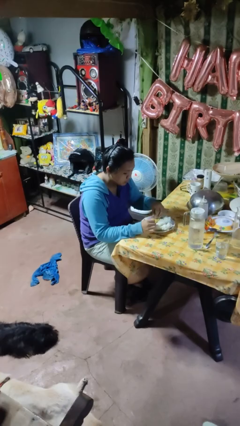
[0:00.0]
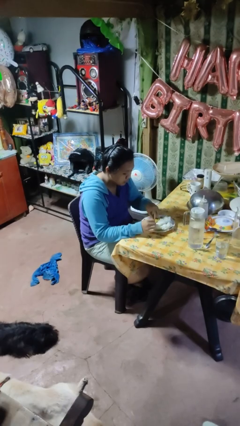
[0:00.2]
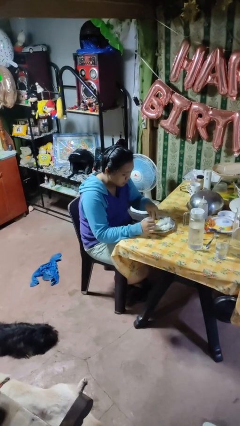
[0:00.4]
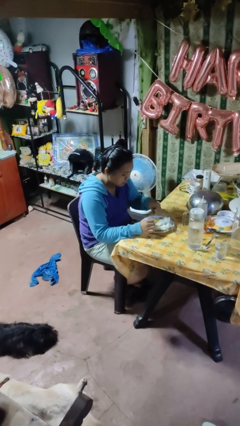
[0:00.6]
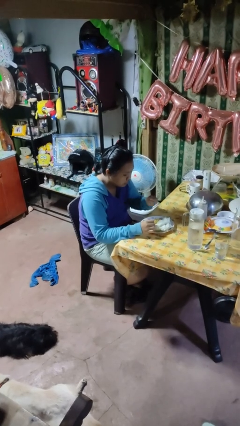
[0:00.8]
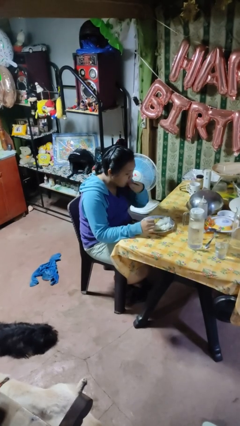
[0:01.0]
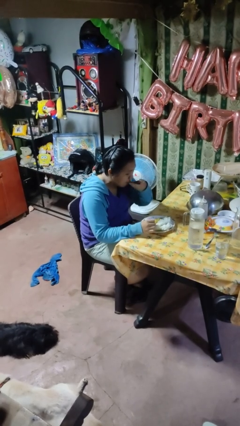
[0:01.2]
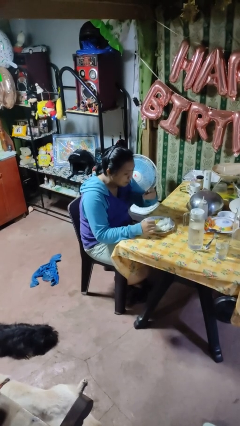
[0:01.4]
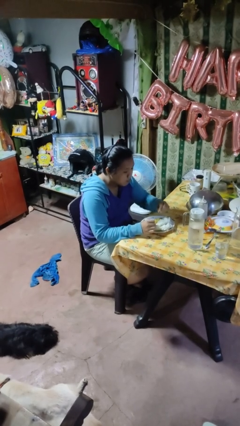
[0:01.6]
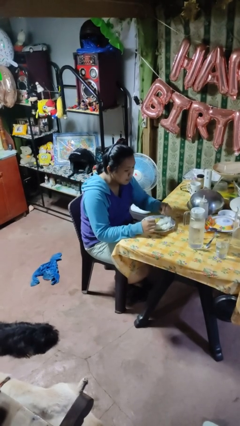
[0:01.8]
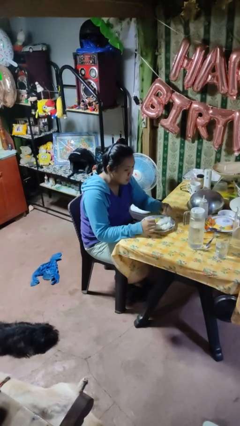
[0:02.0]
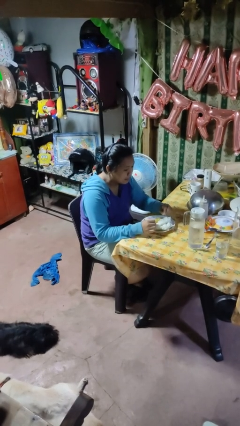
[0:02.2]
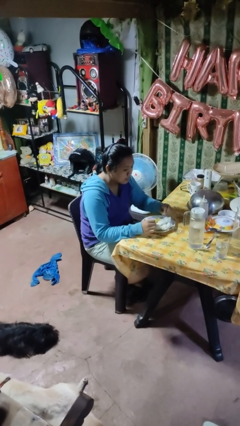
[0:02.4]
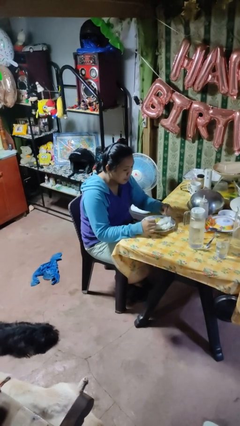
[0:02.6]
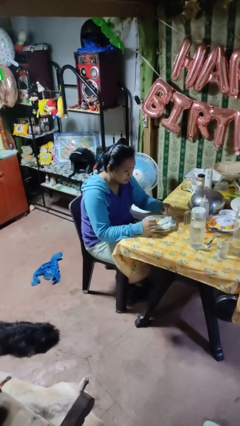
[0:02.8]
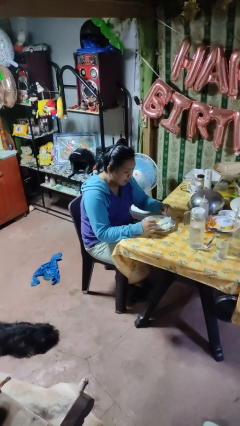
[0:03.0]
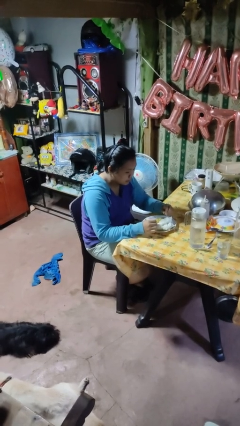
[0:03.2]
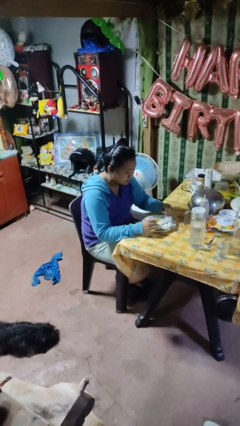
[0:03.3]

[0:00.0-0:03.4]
person eats with hands

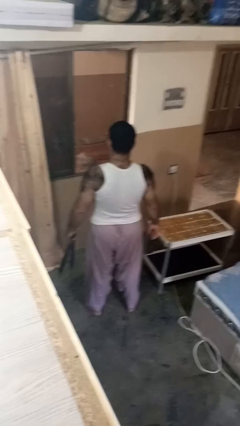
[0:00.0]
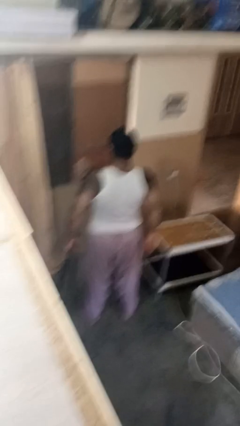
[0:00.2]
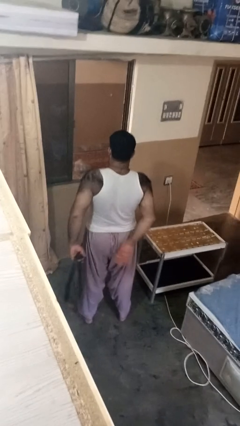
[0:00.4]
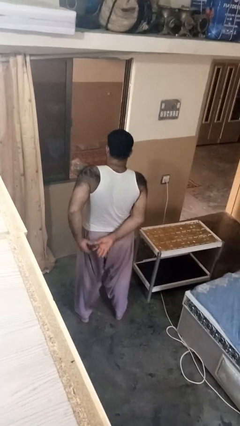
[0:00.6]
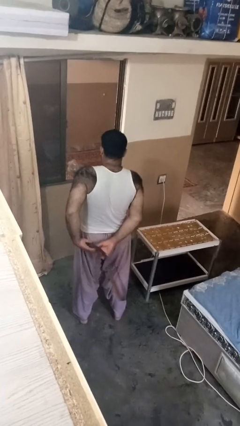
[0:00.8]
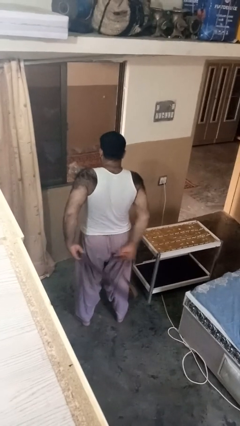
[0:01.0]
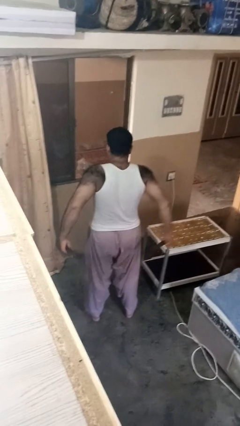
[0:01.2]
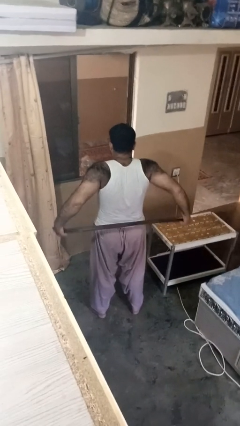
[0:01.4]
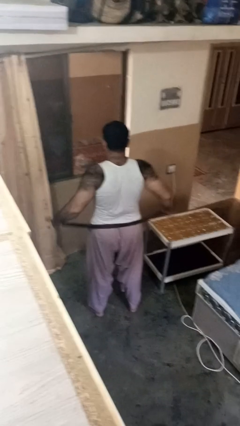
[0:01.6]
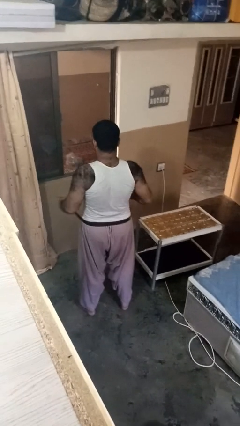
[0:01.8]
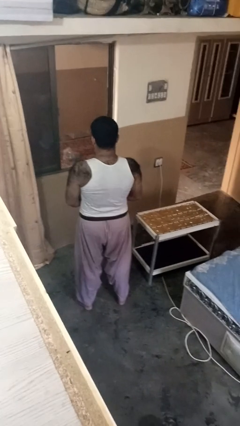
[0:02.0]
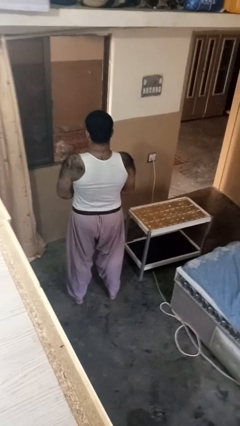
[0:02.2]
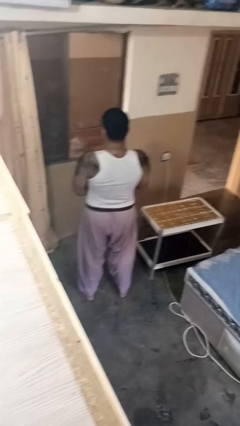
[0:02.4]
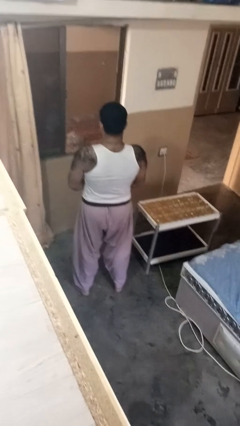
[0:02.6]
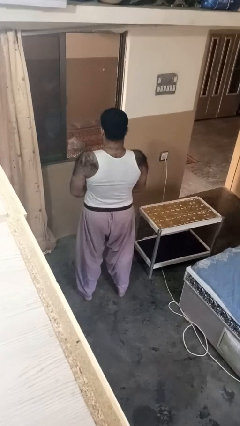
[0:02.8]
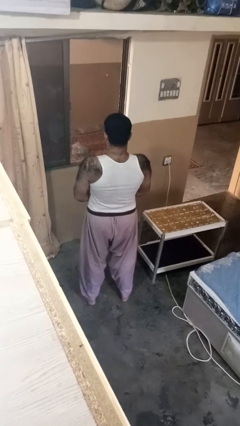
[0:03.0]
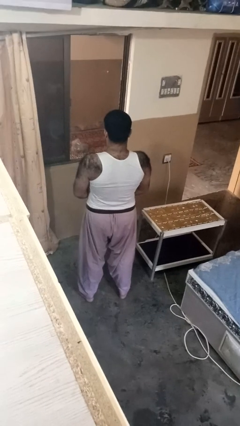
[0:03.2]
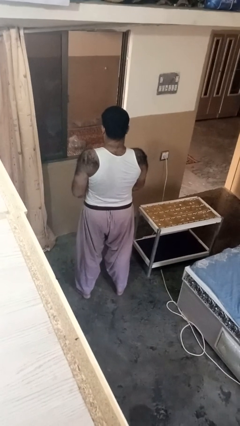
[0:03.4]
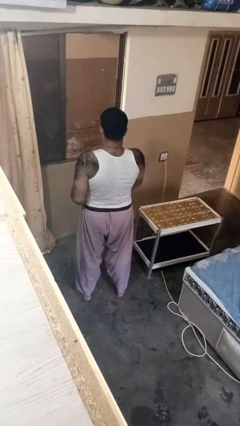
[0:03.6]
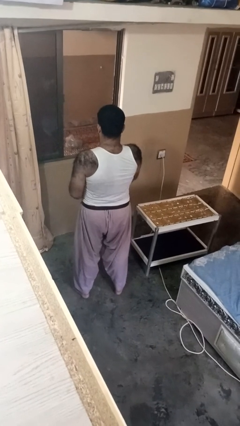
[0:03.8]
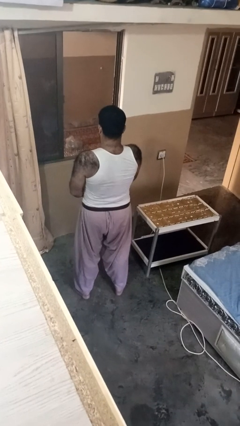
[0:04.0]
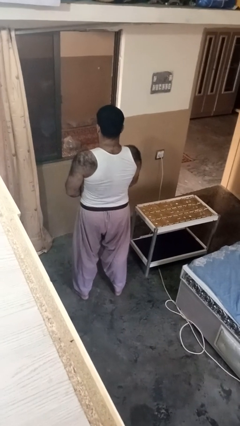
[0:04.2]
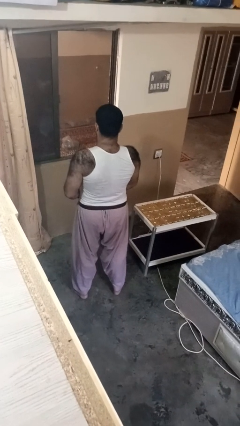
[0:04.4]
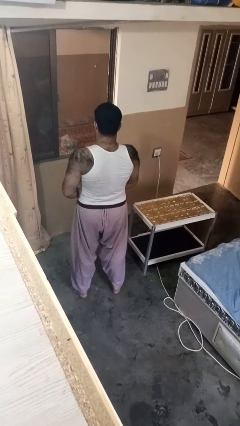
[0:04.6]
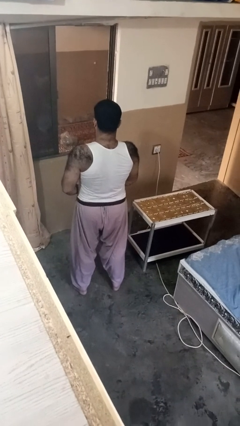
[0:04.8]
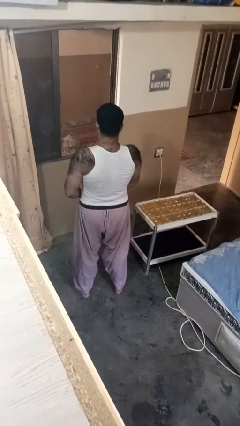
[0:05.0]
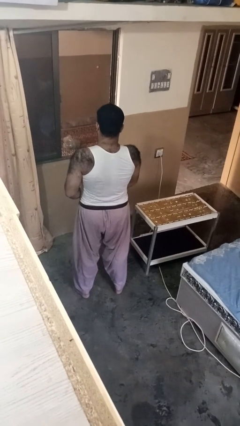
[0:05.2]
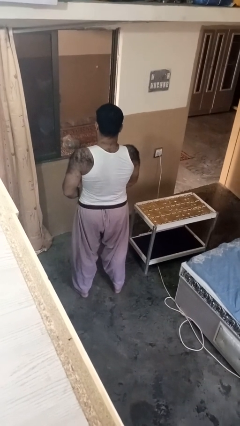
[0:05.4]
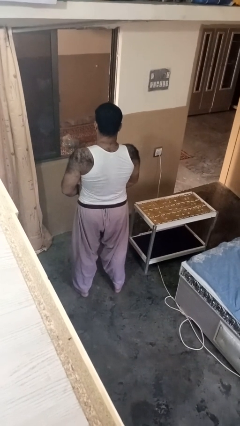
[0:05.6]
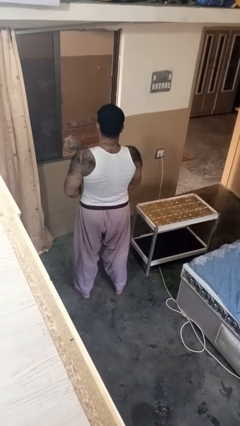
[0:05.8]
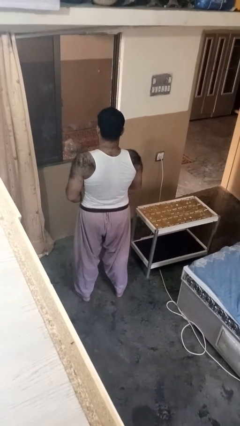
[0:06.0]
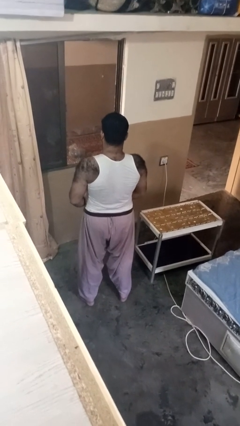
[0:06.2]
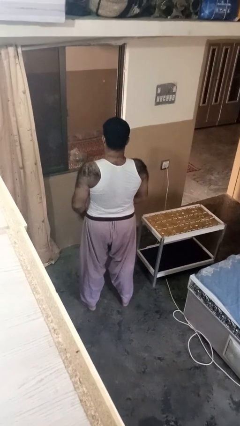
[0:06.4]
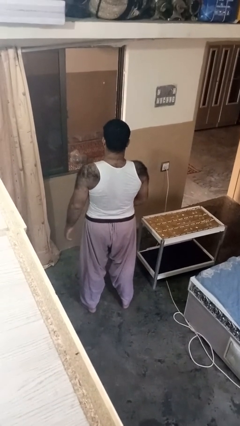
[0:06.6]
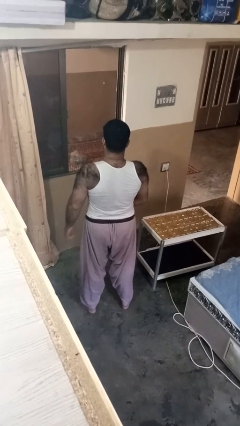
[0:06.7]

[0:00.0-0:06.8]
person puts on belt

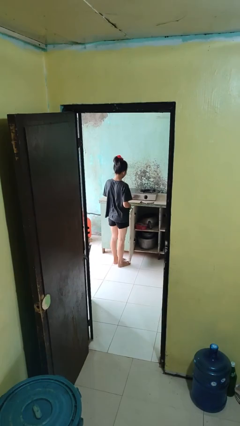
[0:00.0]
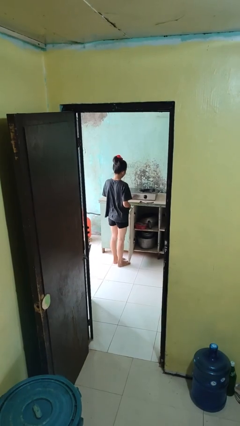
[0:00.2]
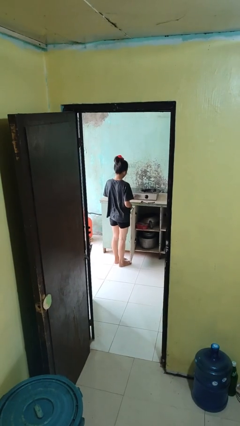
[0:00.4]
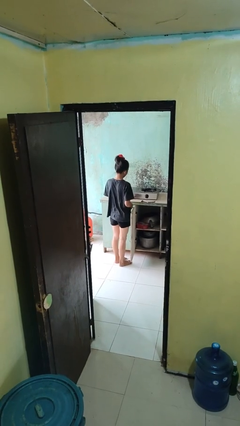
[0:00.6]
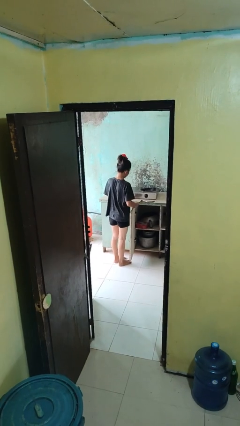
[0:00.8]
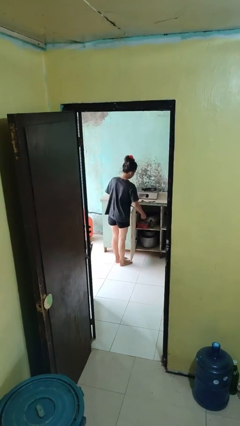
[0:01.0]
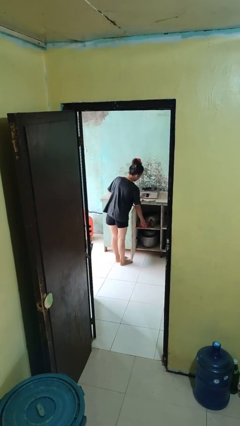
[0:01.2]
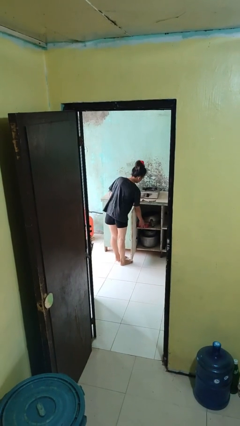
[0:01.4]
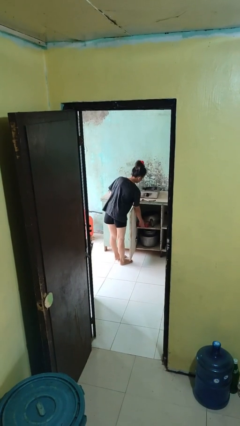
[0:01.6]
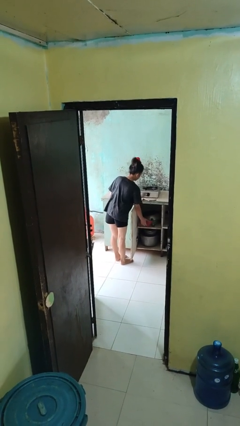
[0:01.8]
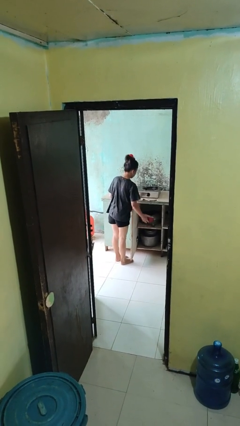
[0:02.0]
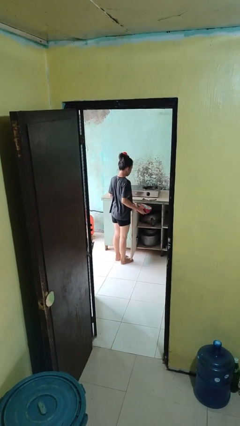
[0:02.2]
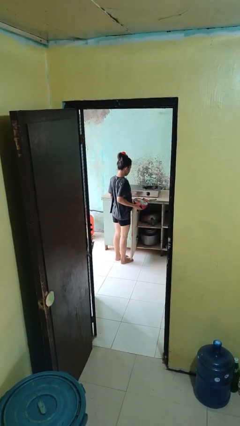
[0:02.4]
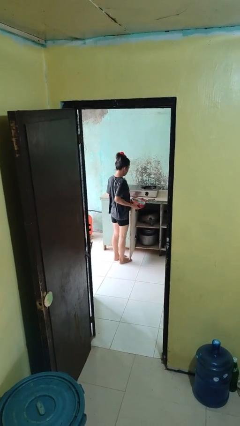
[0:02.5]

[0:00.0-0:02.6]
person takes object from cabinet

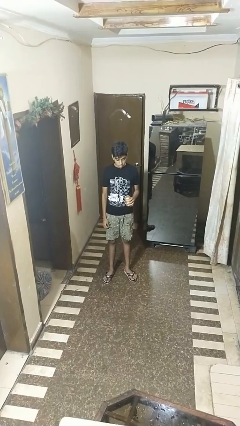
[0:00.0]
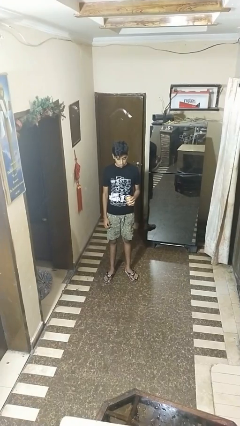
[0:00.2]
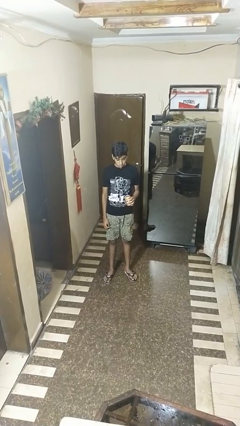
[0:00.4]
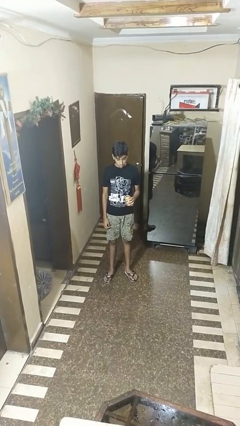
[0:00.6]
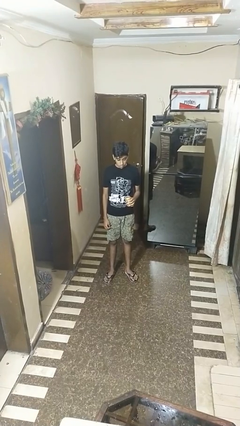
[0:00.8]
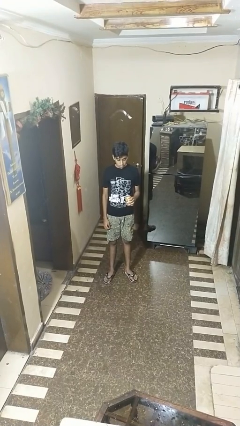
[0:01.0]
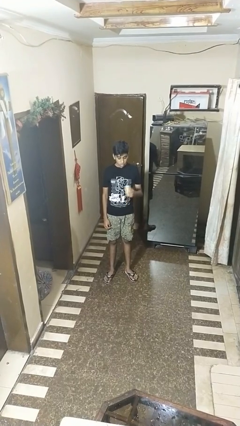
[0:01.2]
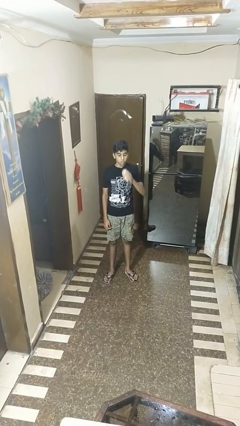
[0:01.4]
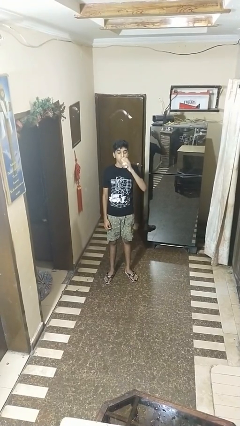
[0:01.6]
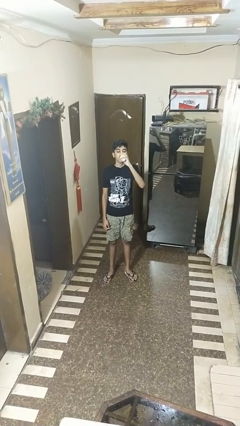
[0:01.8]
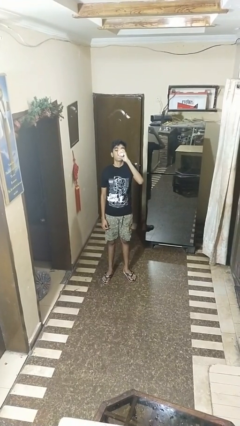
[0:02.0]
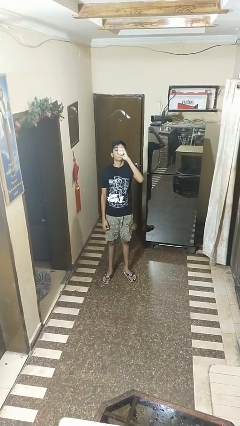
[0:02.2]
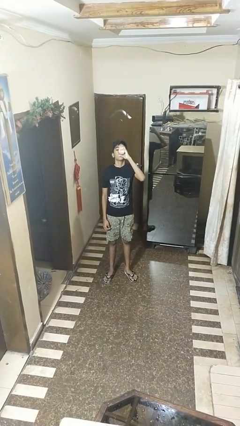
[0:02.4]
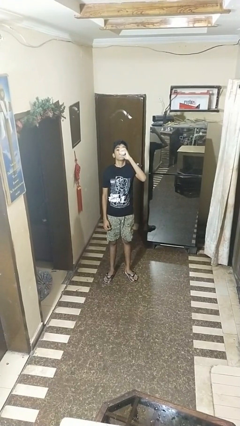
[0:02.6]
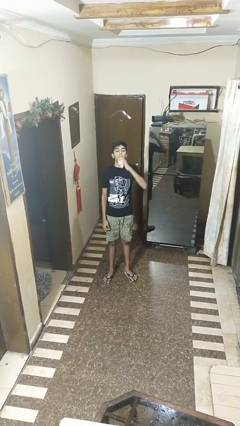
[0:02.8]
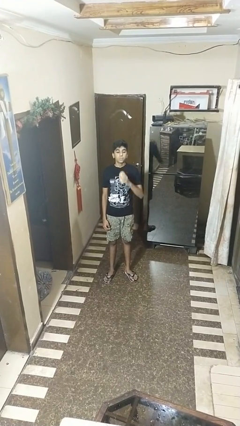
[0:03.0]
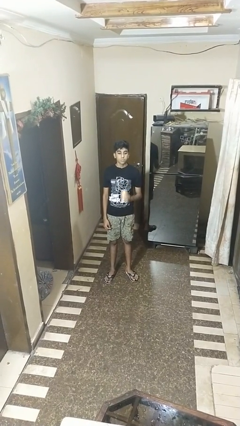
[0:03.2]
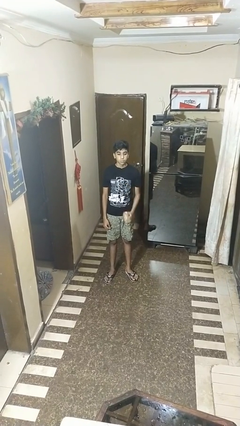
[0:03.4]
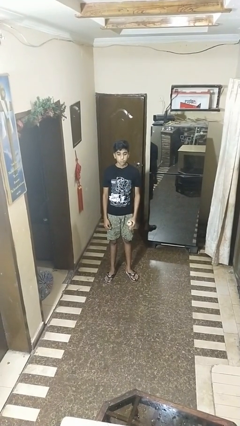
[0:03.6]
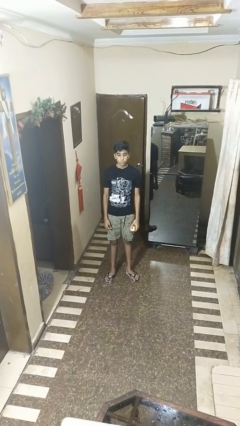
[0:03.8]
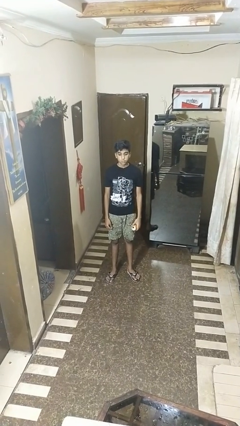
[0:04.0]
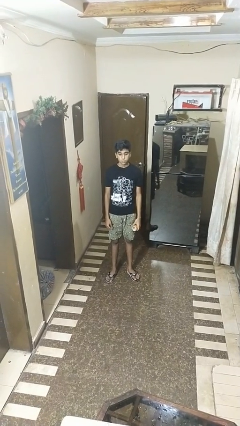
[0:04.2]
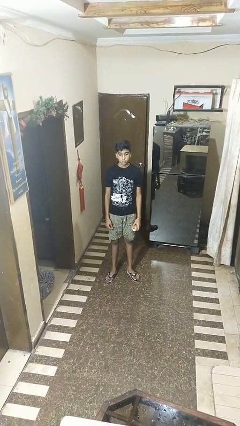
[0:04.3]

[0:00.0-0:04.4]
person drinks from beverage can

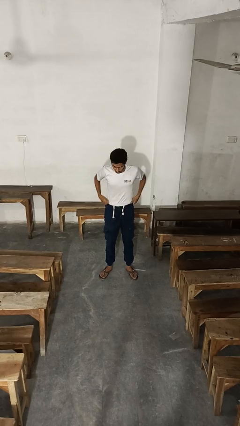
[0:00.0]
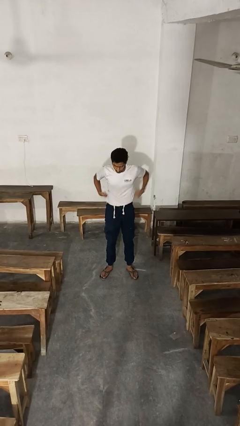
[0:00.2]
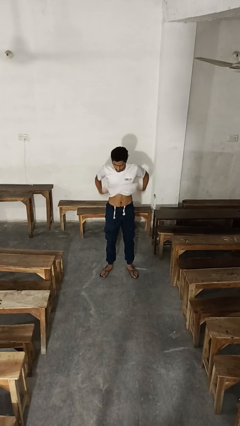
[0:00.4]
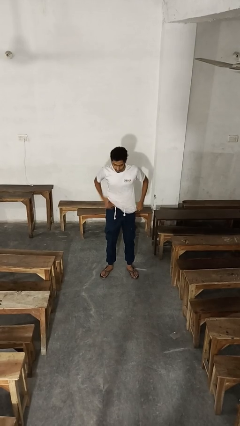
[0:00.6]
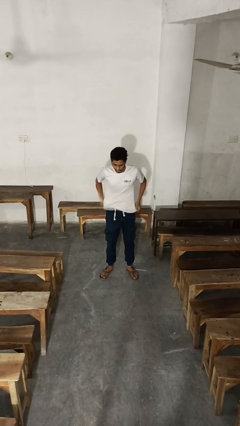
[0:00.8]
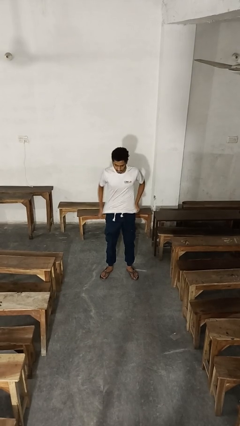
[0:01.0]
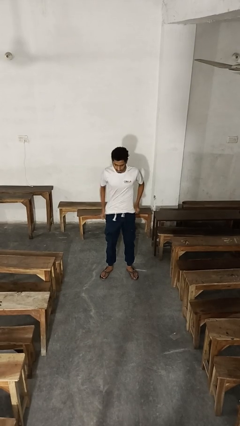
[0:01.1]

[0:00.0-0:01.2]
person untucks shirt
